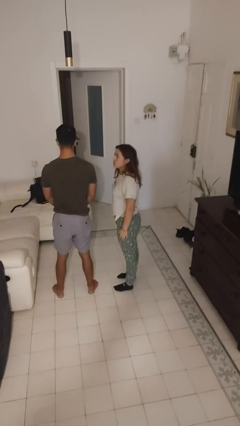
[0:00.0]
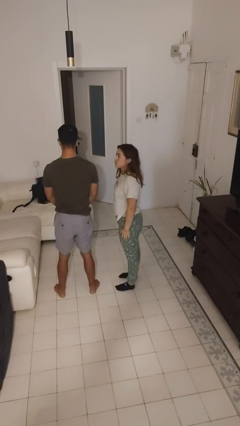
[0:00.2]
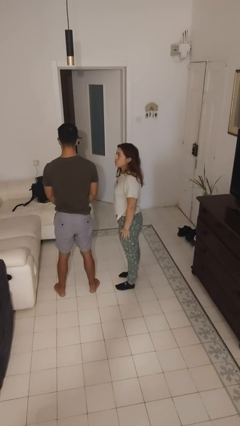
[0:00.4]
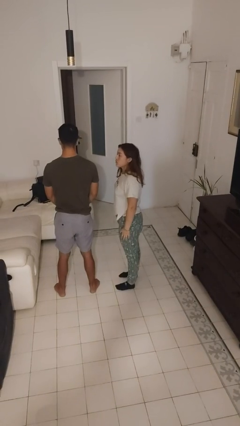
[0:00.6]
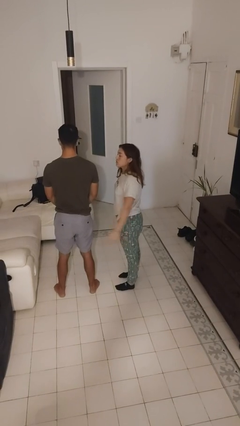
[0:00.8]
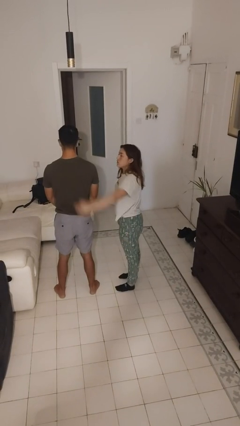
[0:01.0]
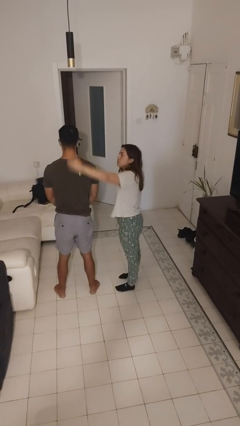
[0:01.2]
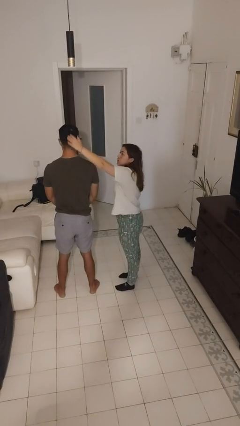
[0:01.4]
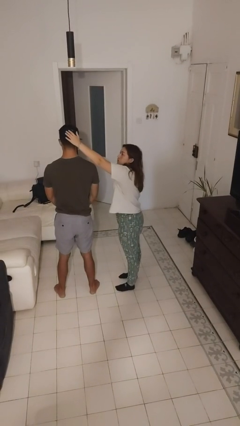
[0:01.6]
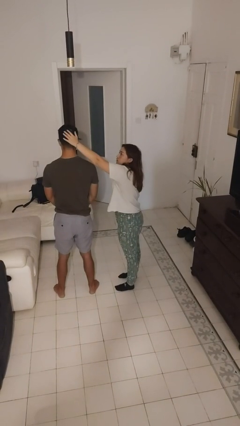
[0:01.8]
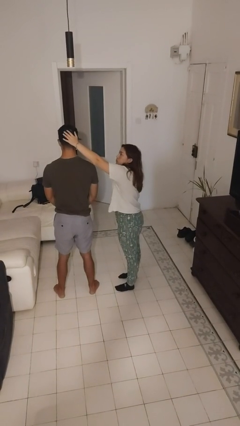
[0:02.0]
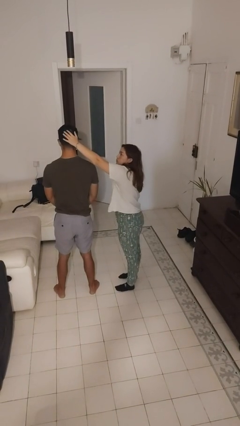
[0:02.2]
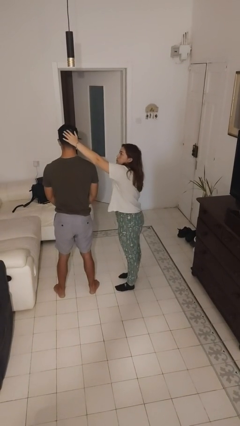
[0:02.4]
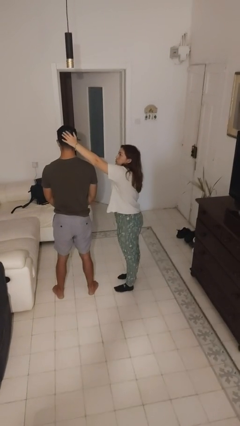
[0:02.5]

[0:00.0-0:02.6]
person grabs person by hair

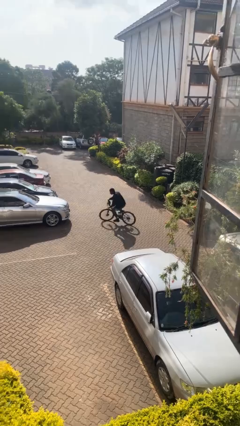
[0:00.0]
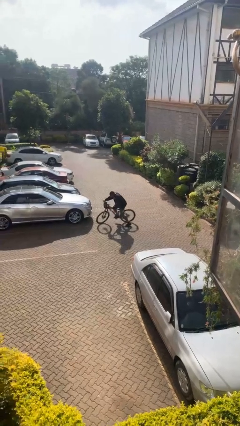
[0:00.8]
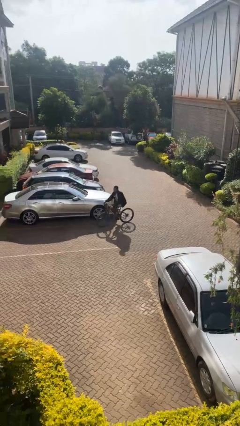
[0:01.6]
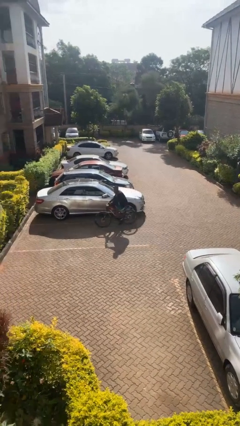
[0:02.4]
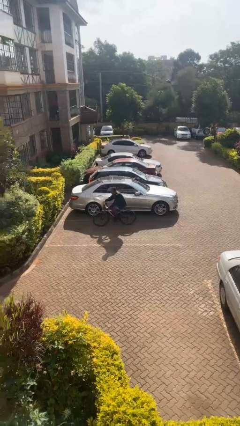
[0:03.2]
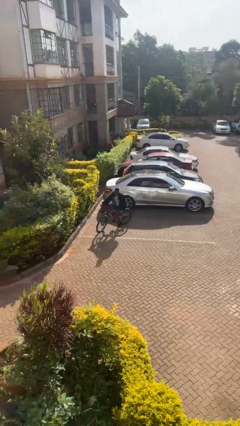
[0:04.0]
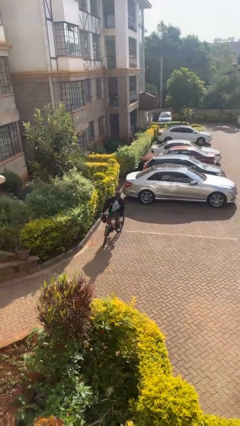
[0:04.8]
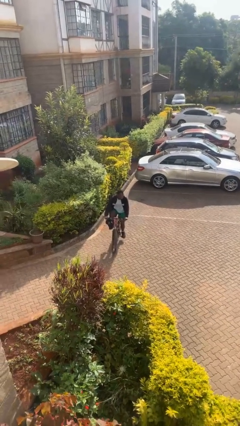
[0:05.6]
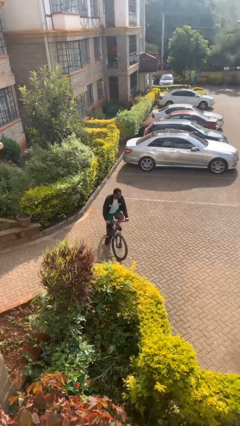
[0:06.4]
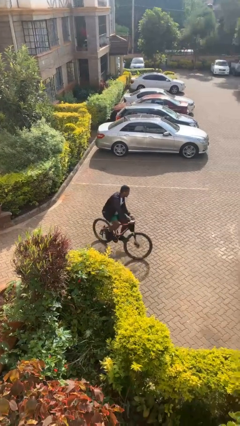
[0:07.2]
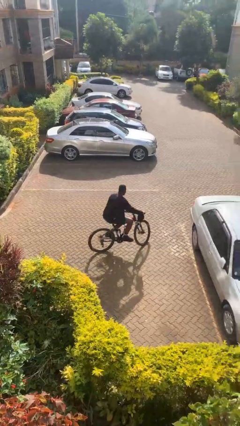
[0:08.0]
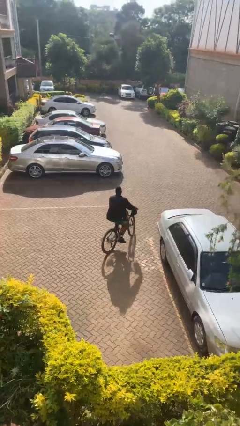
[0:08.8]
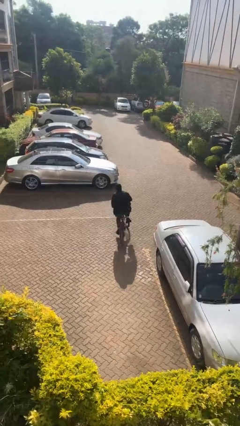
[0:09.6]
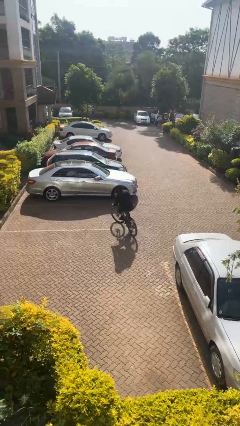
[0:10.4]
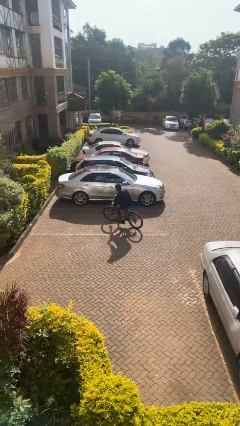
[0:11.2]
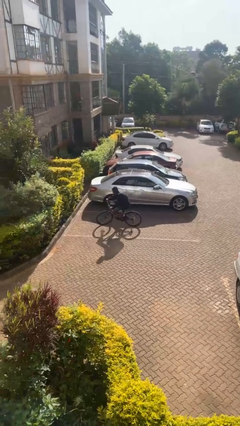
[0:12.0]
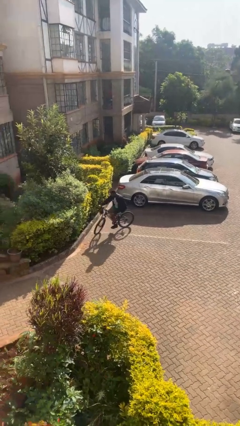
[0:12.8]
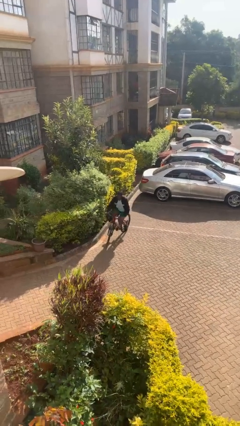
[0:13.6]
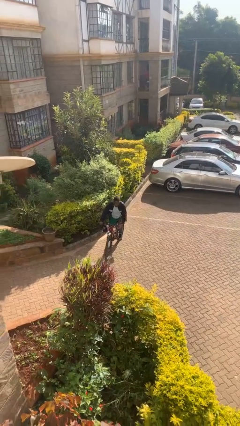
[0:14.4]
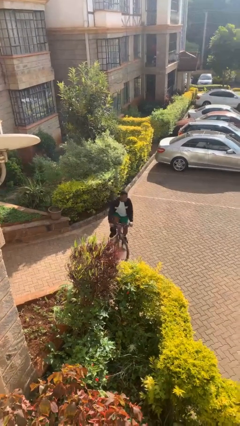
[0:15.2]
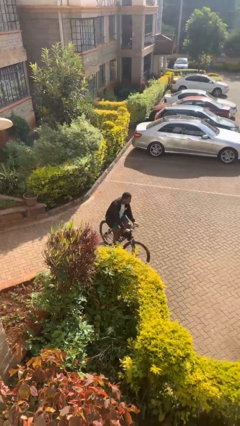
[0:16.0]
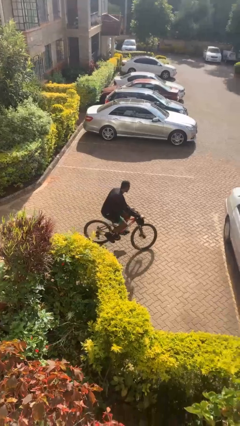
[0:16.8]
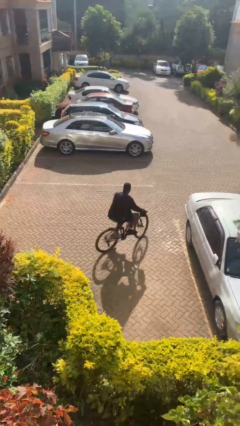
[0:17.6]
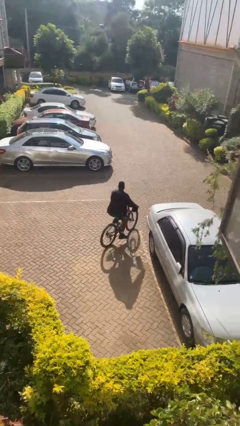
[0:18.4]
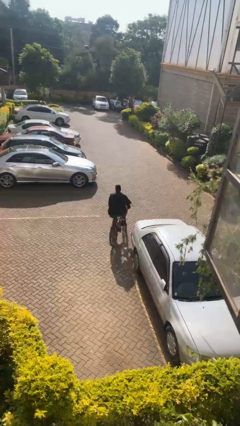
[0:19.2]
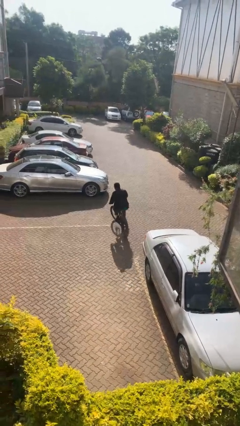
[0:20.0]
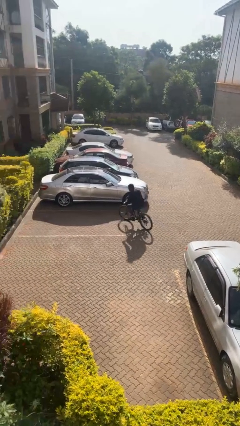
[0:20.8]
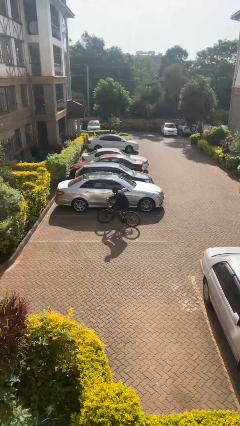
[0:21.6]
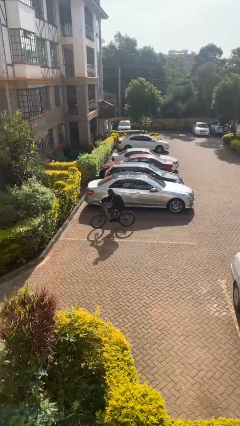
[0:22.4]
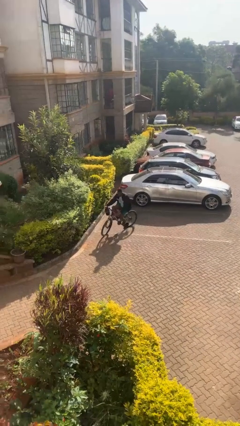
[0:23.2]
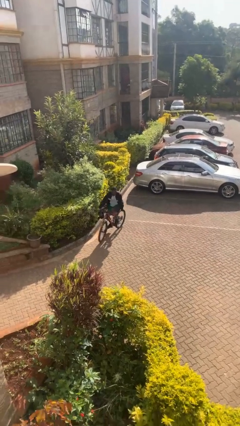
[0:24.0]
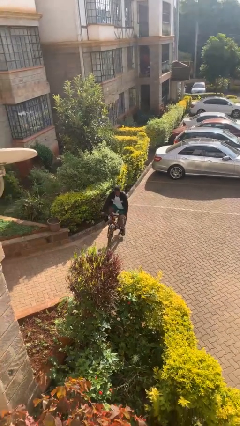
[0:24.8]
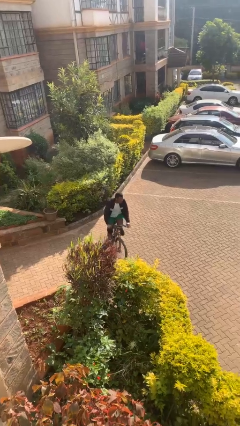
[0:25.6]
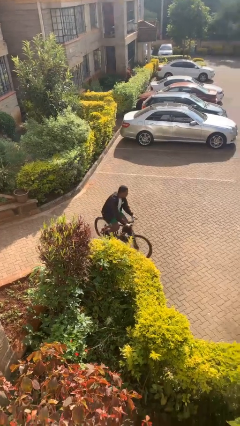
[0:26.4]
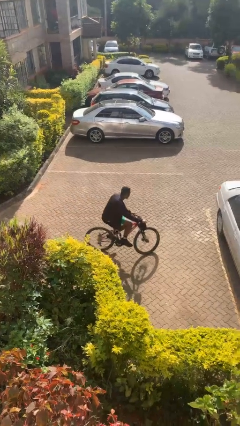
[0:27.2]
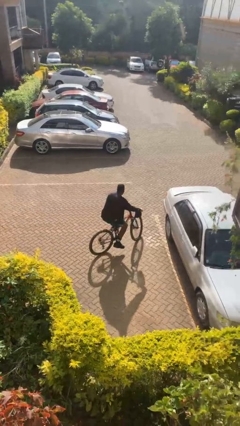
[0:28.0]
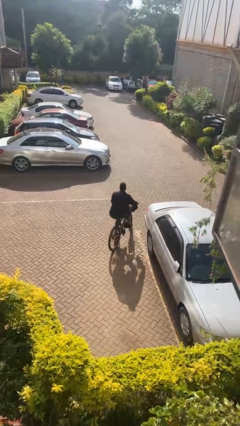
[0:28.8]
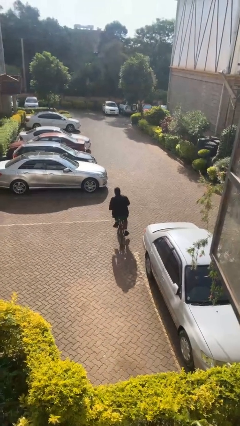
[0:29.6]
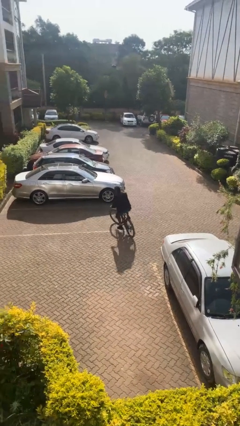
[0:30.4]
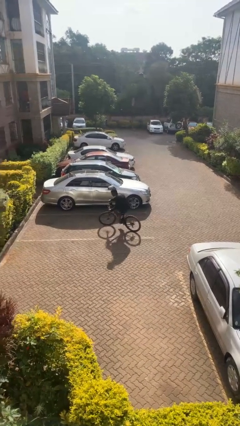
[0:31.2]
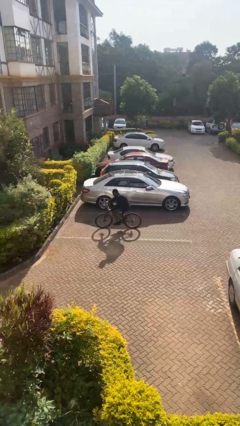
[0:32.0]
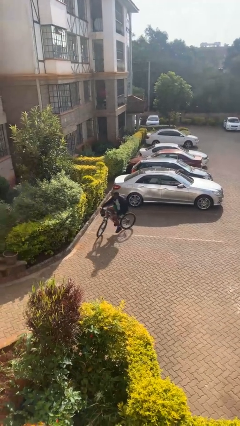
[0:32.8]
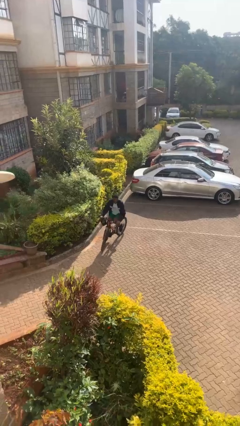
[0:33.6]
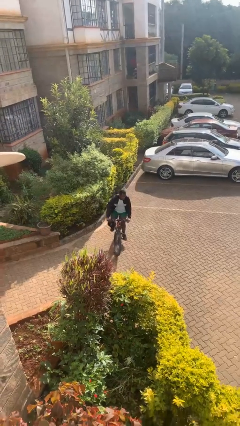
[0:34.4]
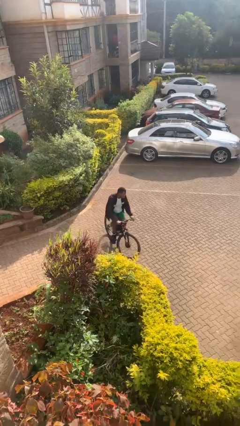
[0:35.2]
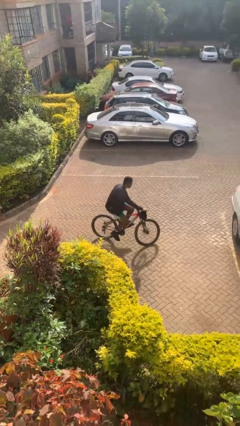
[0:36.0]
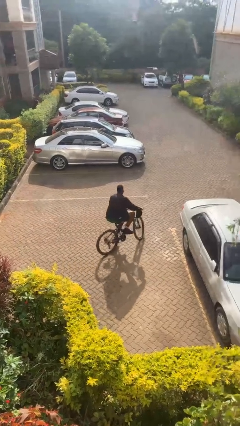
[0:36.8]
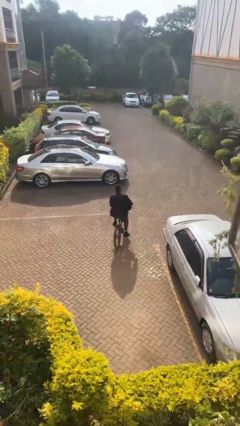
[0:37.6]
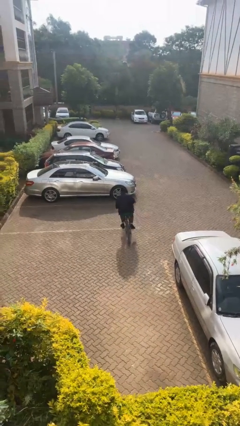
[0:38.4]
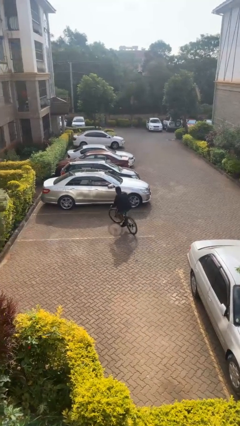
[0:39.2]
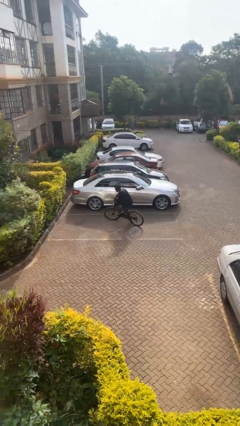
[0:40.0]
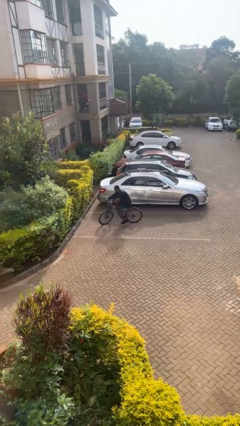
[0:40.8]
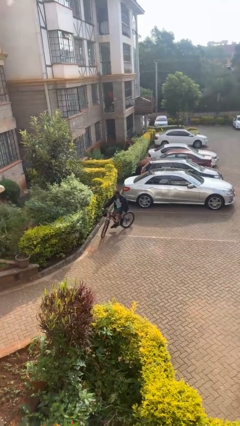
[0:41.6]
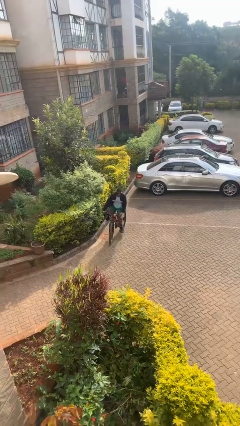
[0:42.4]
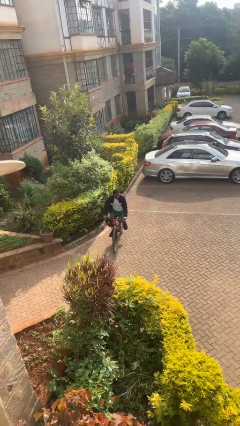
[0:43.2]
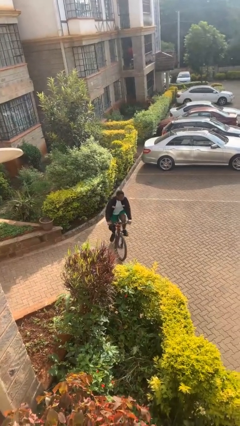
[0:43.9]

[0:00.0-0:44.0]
person rides bicycle

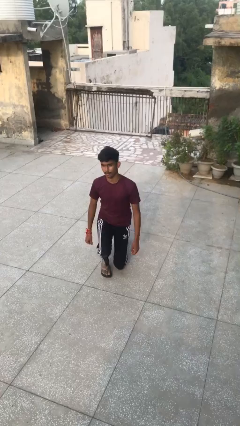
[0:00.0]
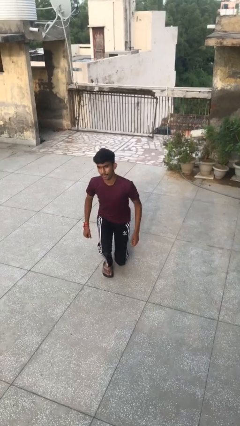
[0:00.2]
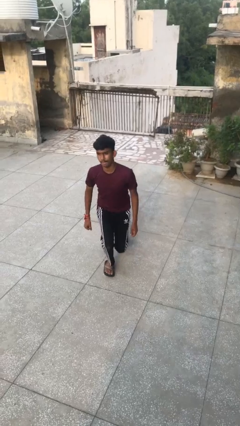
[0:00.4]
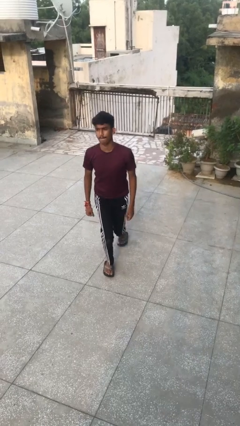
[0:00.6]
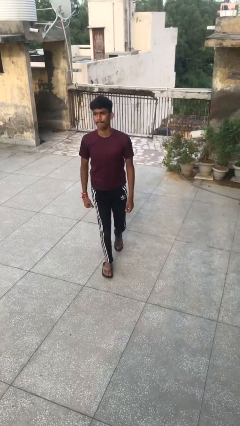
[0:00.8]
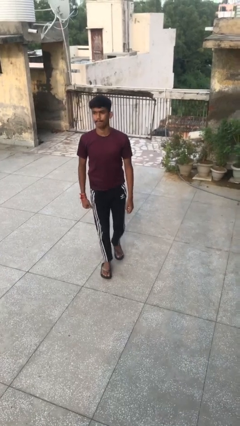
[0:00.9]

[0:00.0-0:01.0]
person stands up from floor

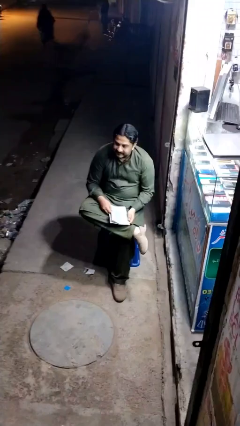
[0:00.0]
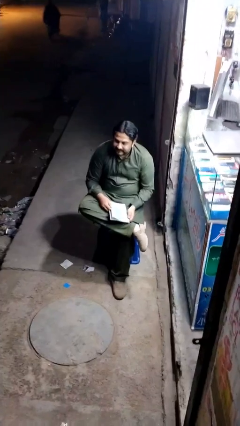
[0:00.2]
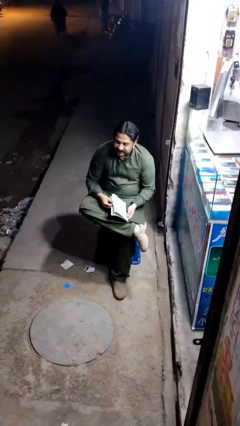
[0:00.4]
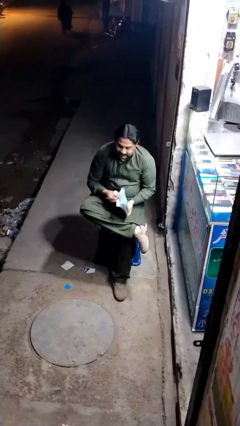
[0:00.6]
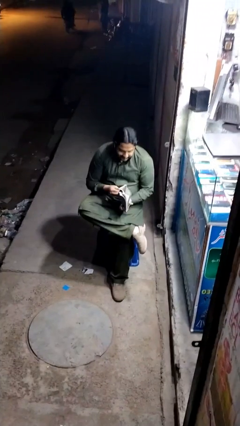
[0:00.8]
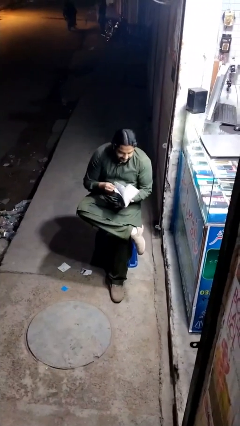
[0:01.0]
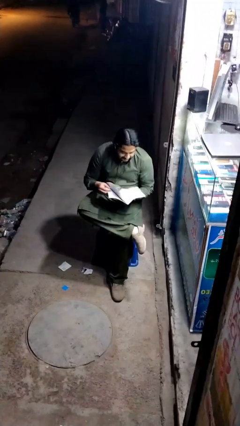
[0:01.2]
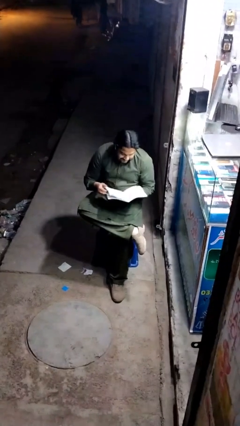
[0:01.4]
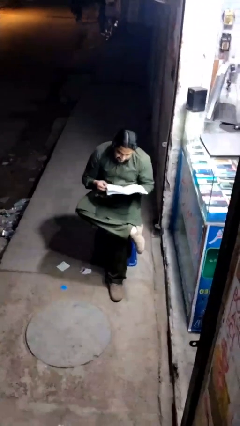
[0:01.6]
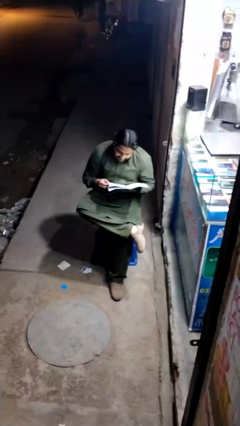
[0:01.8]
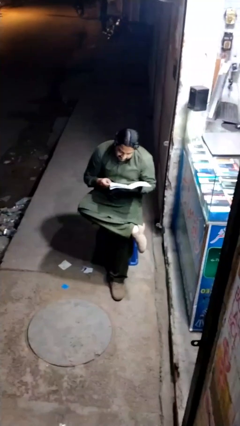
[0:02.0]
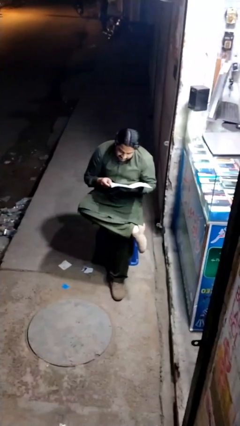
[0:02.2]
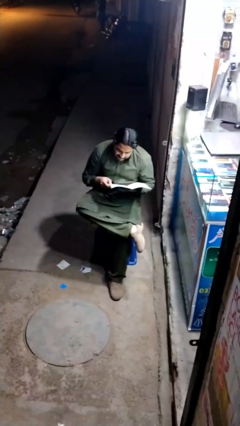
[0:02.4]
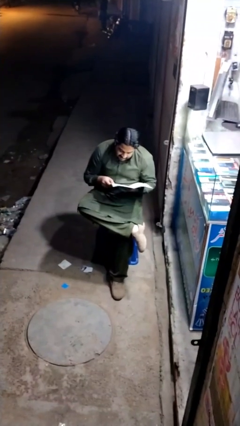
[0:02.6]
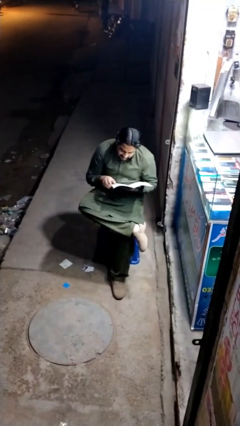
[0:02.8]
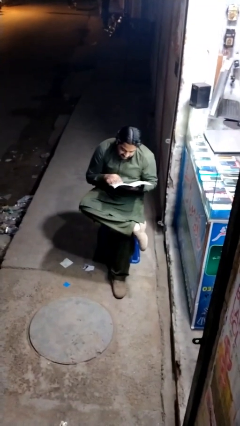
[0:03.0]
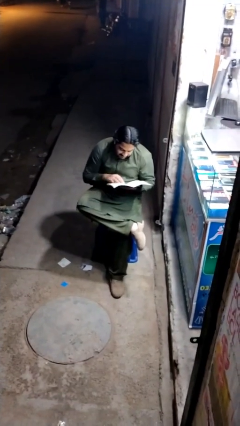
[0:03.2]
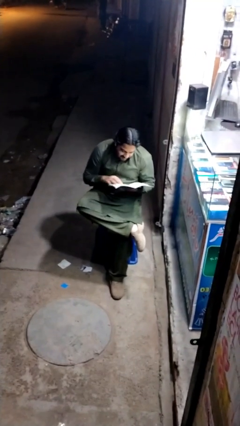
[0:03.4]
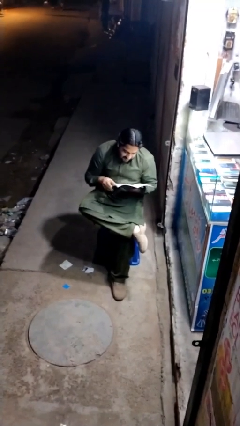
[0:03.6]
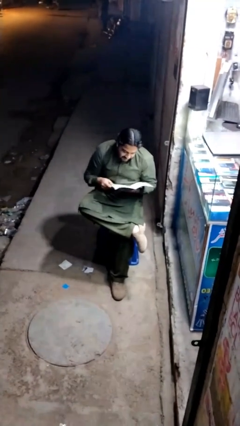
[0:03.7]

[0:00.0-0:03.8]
person reads document
